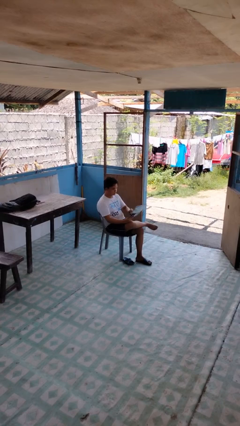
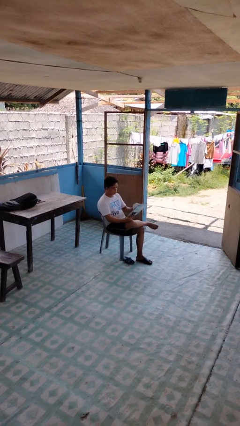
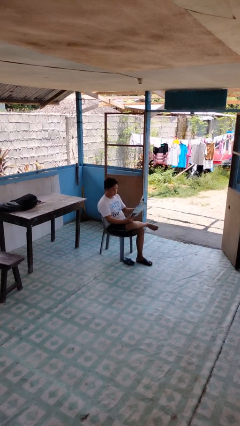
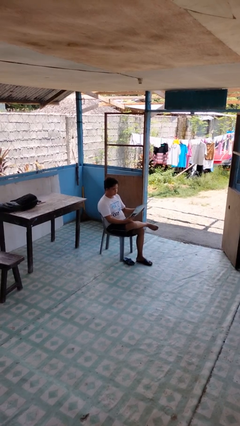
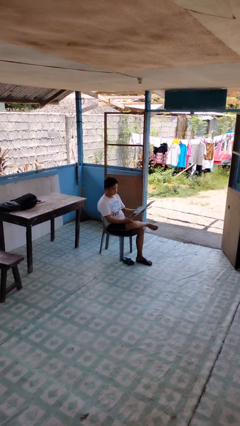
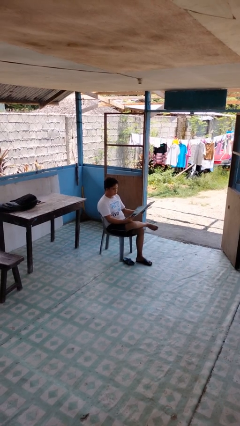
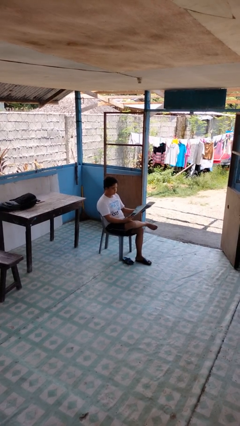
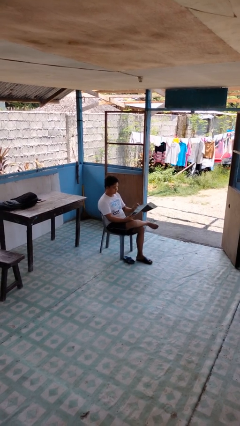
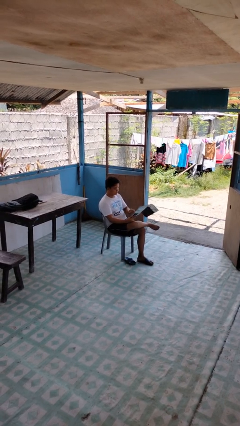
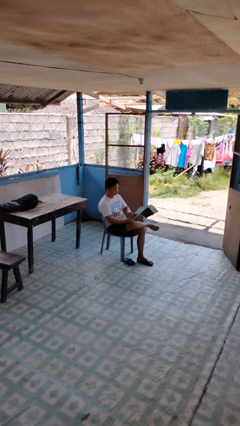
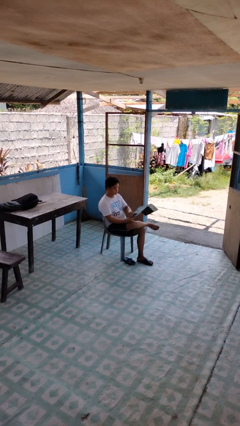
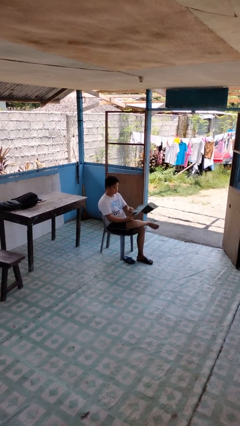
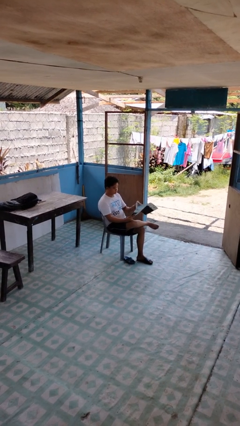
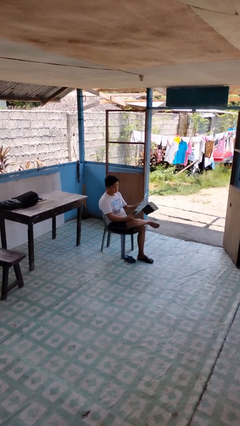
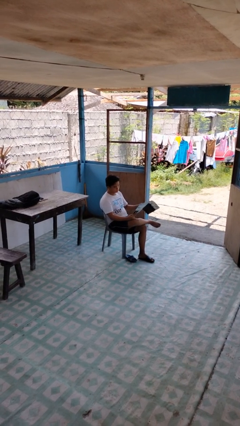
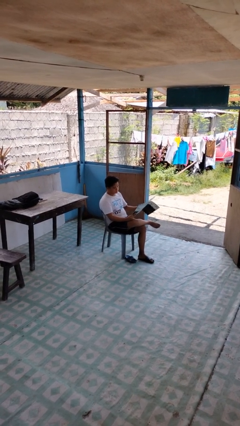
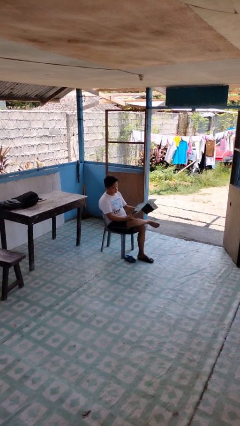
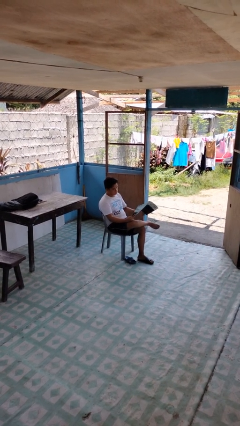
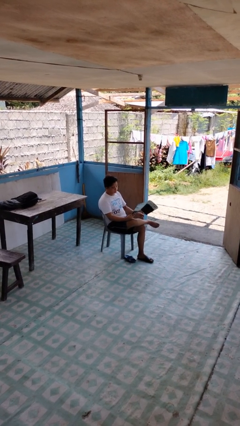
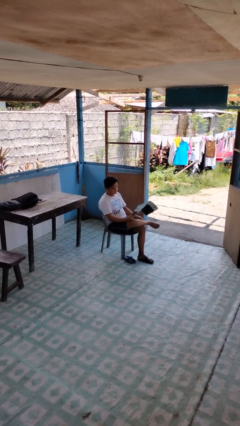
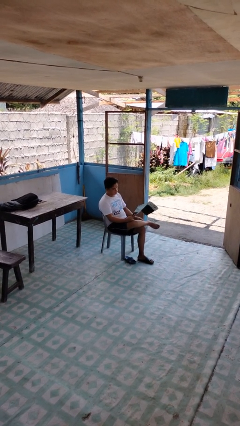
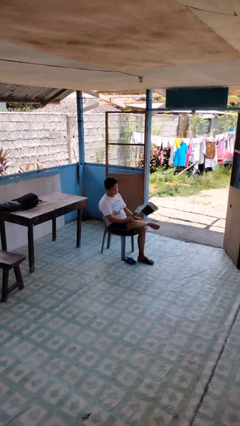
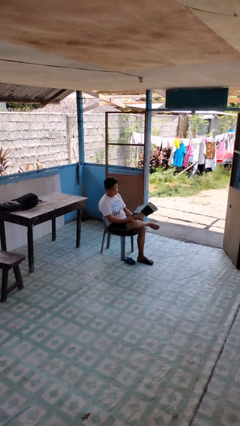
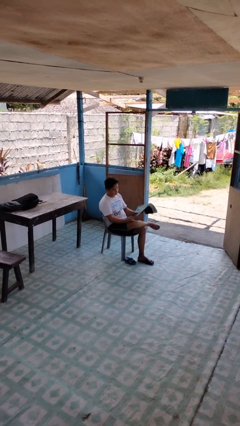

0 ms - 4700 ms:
person reads magazine

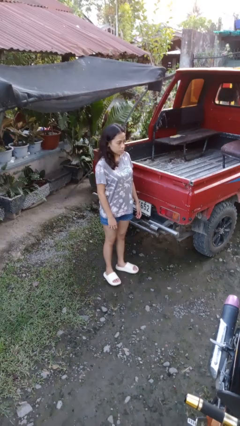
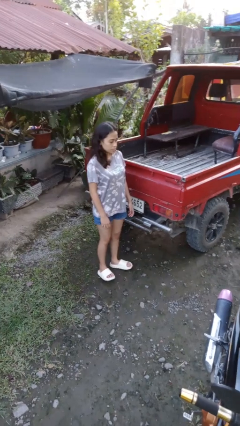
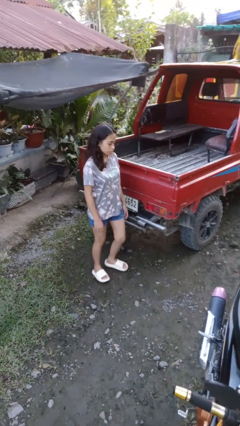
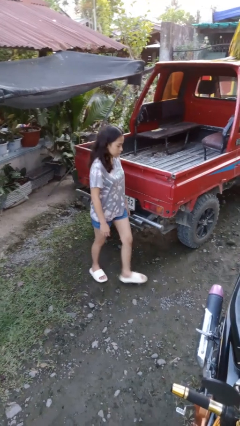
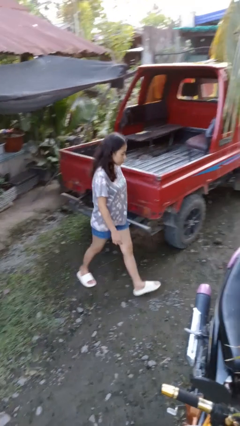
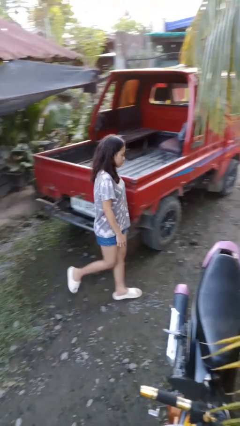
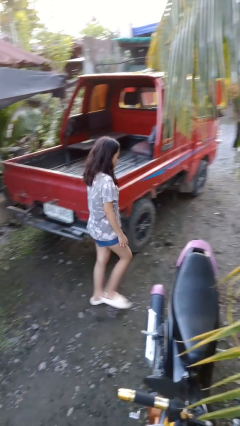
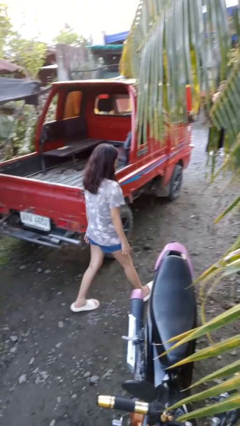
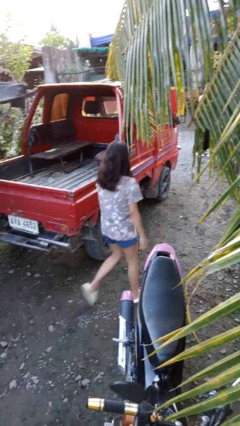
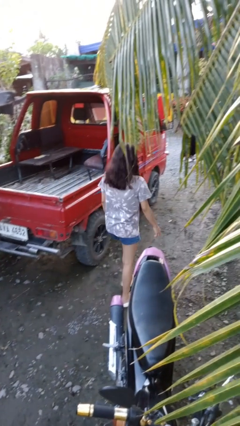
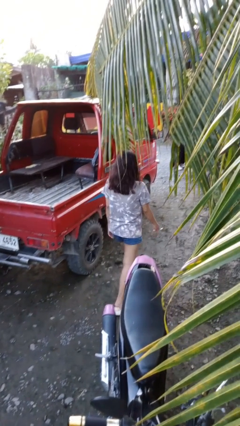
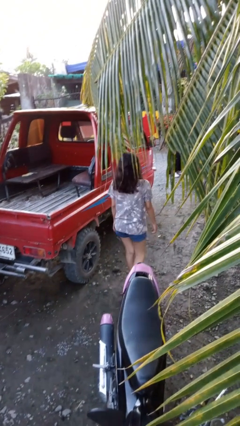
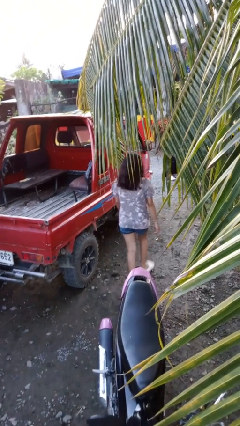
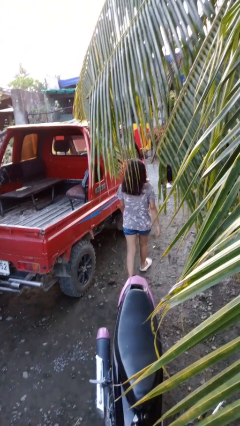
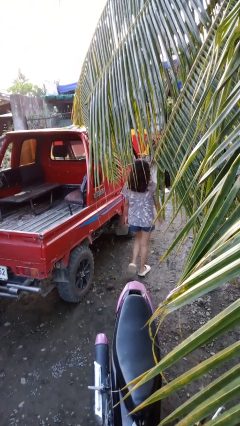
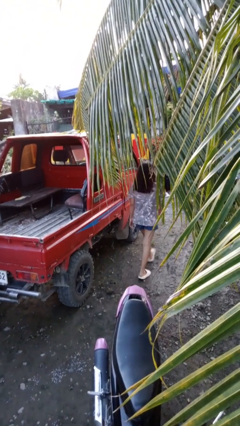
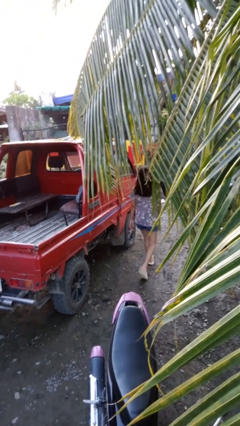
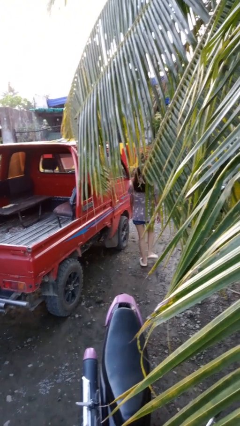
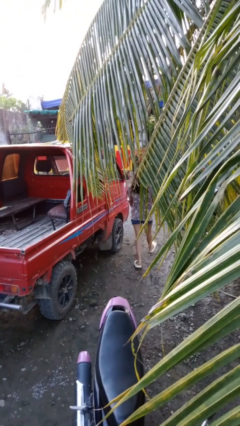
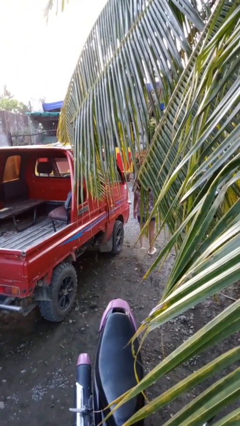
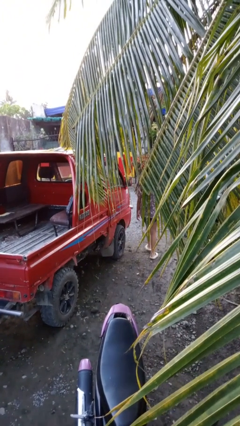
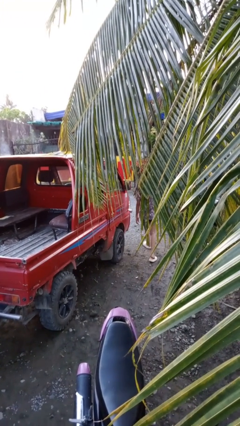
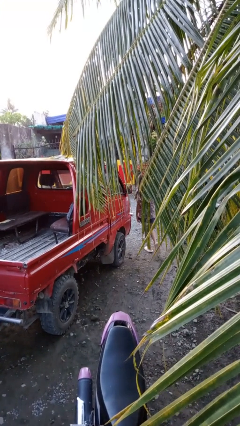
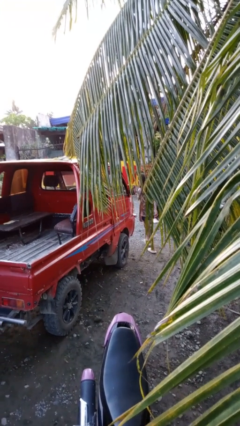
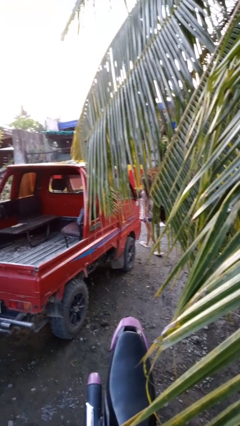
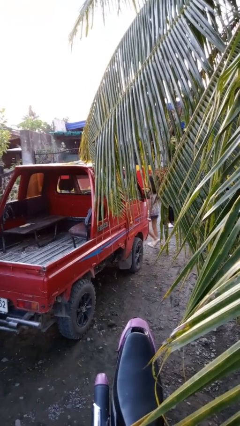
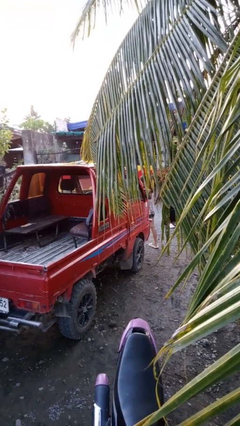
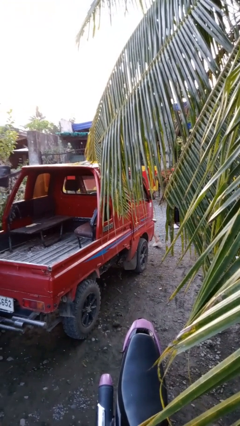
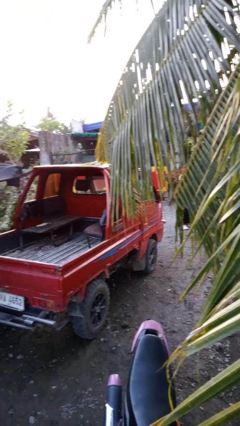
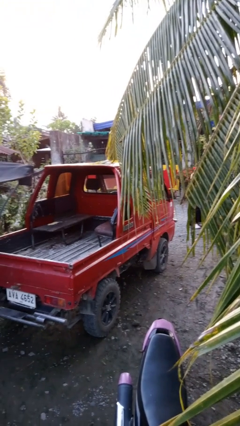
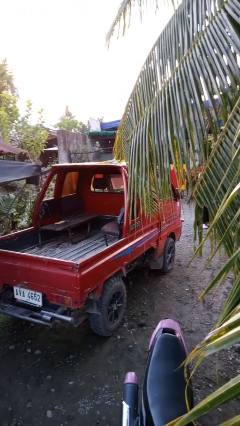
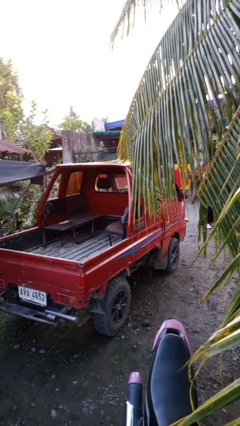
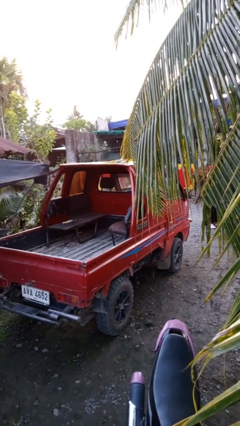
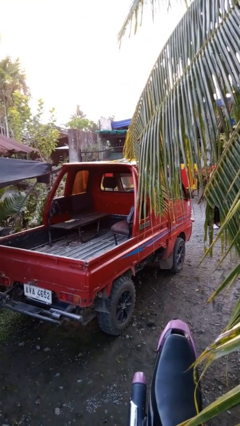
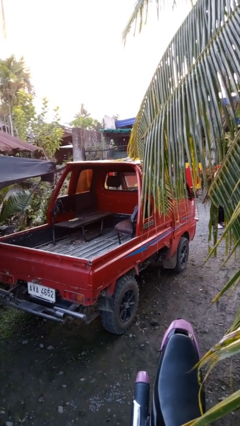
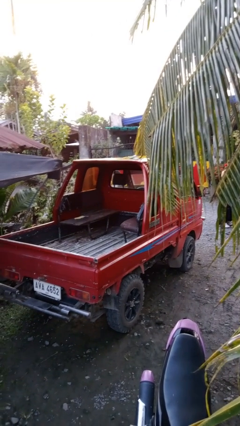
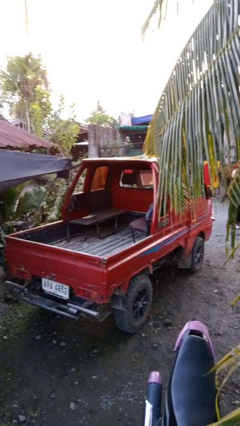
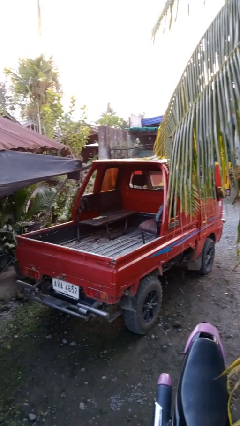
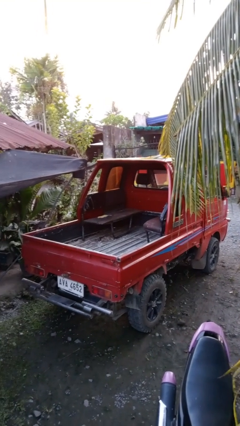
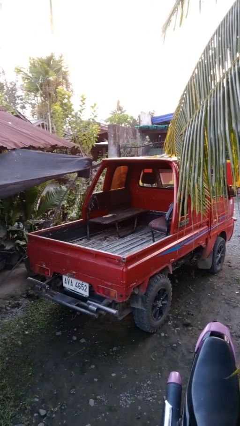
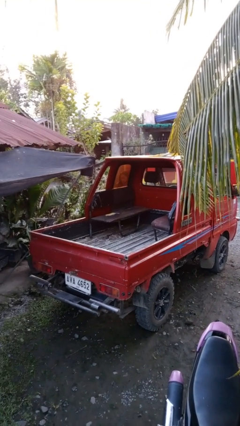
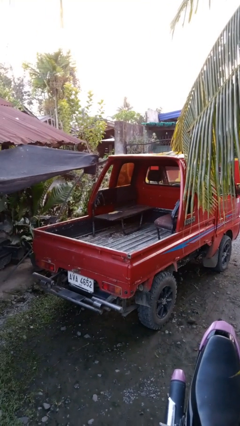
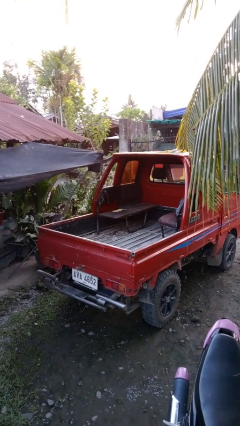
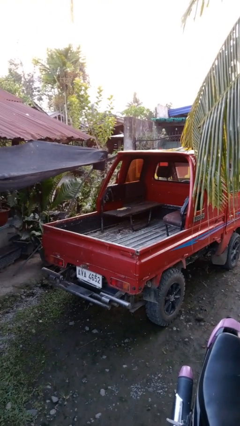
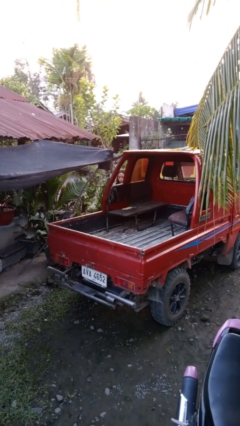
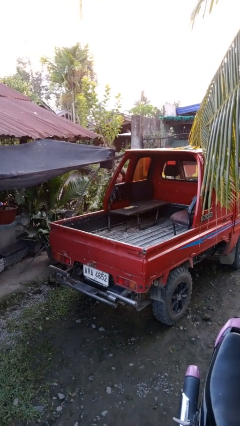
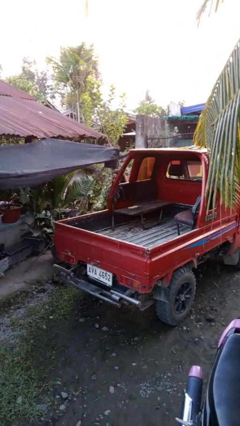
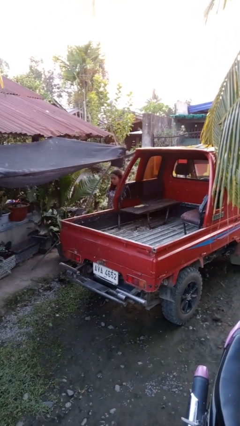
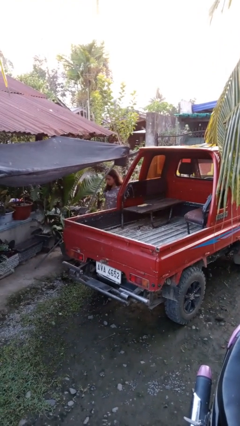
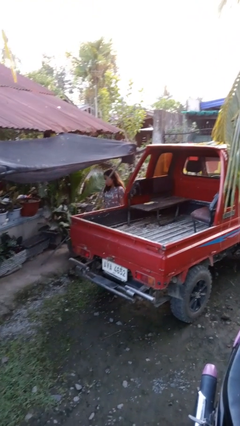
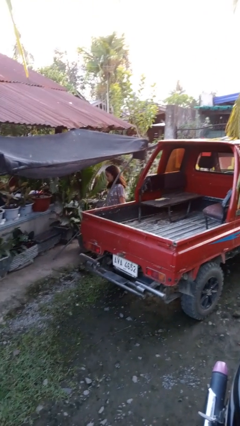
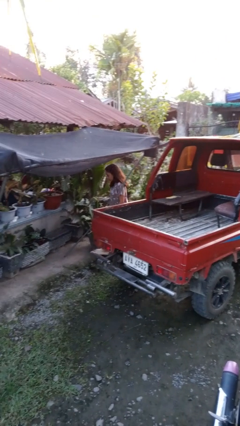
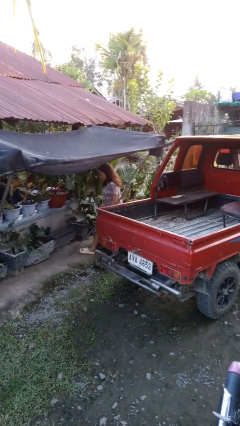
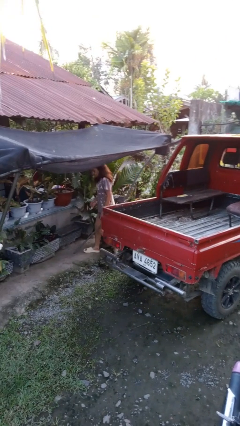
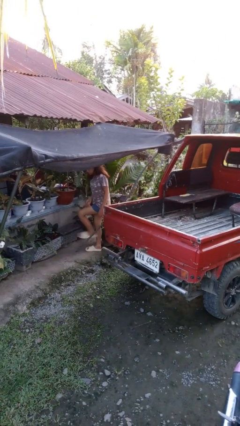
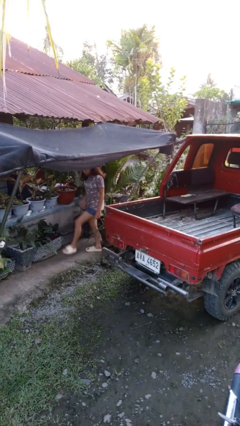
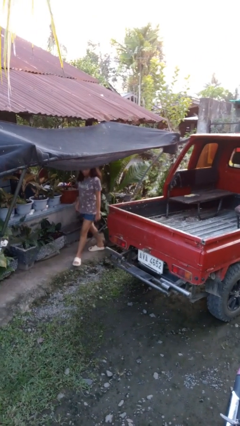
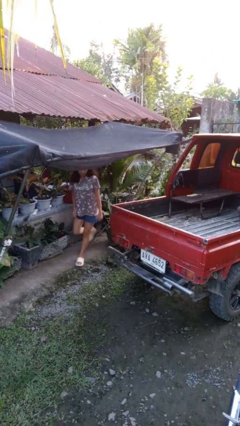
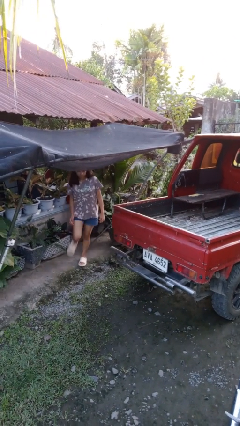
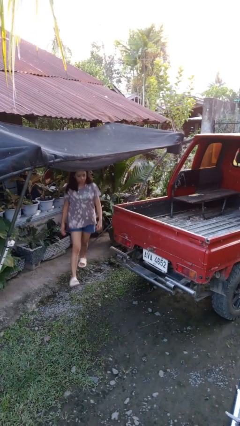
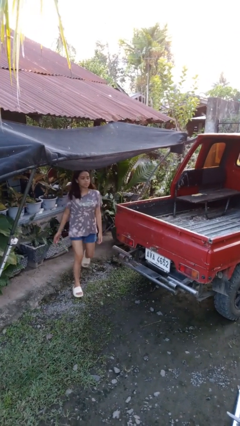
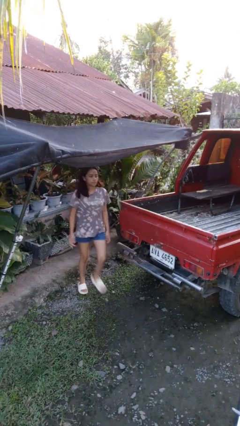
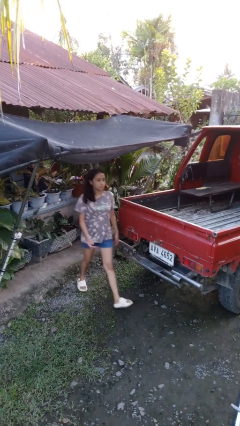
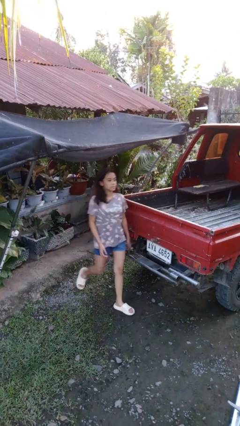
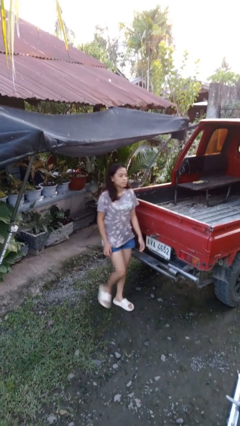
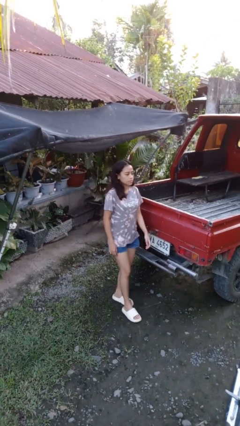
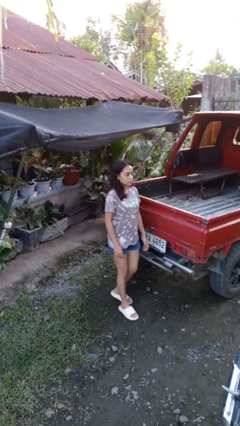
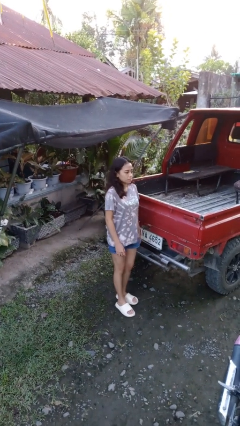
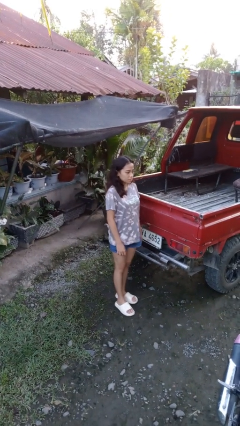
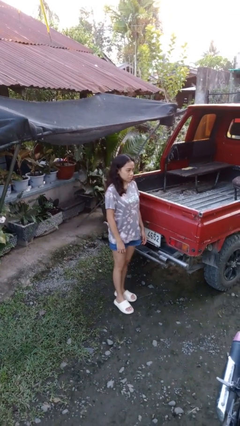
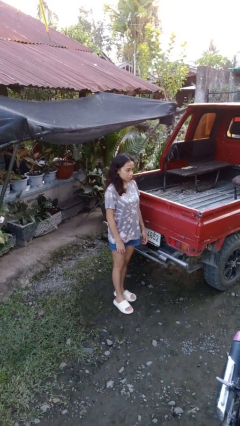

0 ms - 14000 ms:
person walks around car
